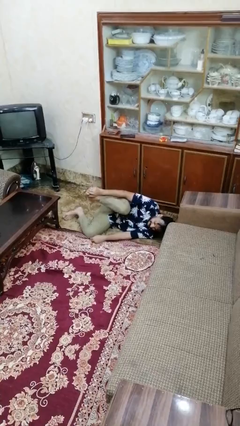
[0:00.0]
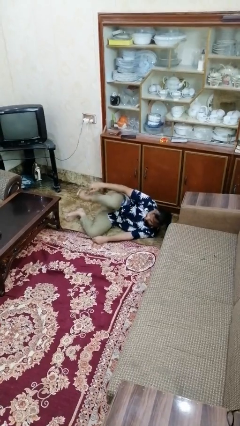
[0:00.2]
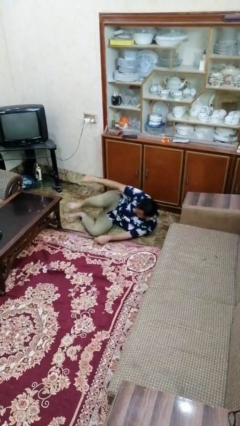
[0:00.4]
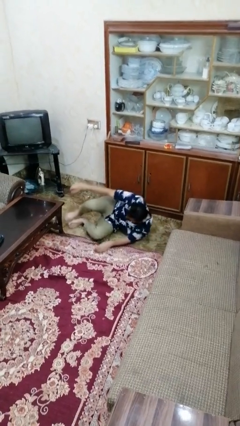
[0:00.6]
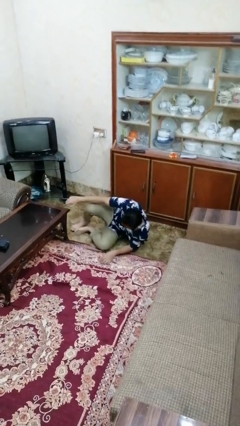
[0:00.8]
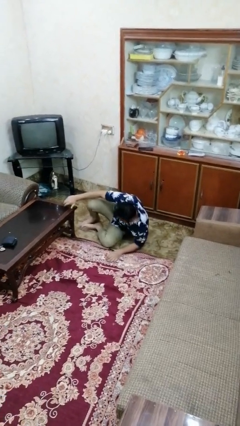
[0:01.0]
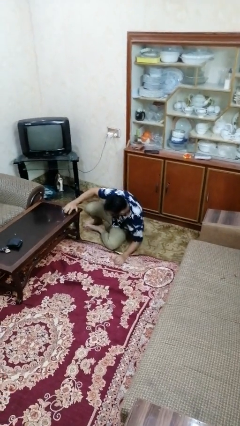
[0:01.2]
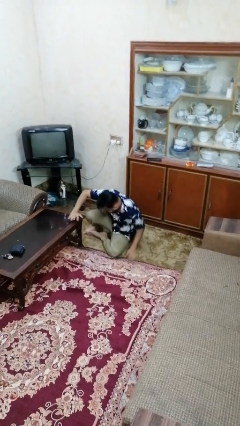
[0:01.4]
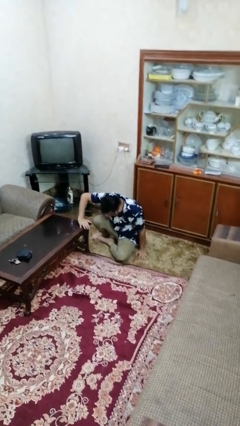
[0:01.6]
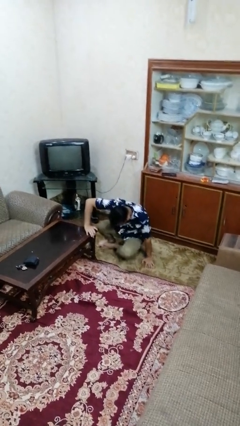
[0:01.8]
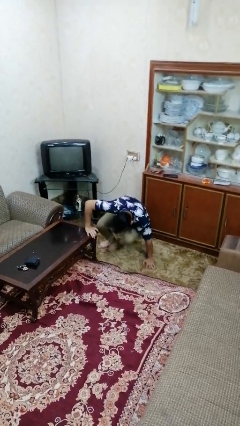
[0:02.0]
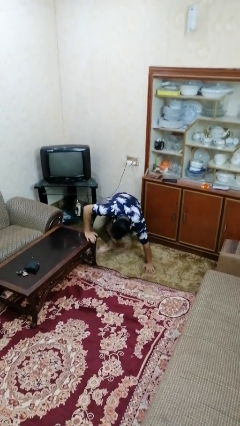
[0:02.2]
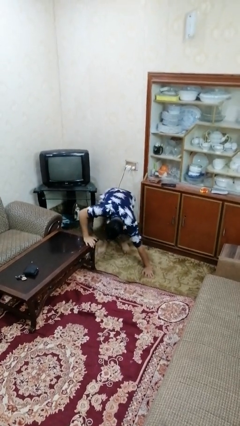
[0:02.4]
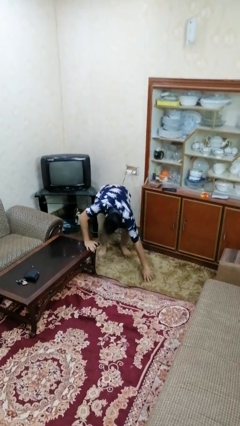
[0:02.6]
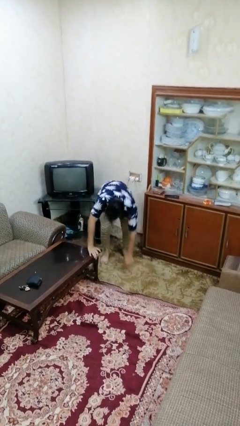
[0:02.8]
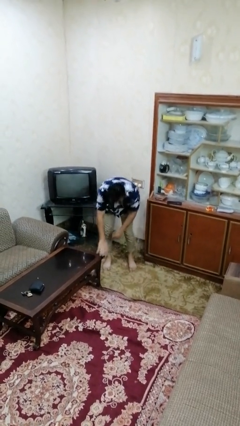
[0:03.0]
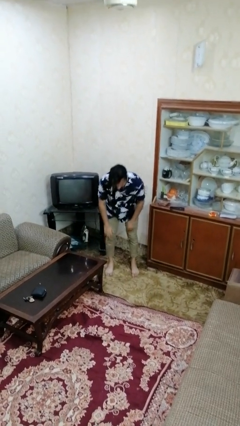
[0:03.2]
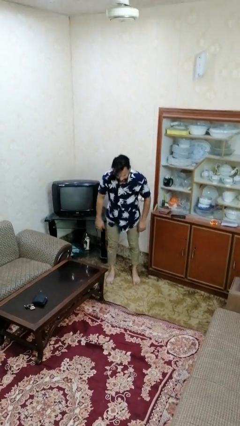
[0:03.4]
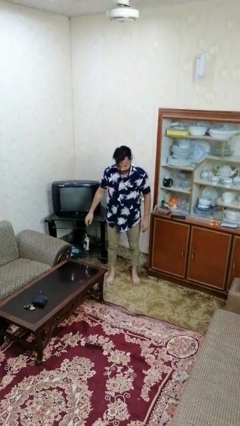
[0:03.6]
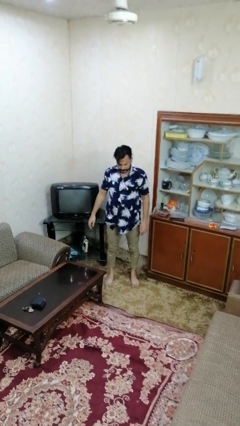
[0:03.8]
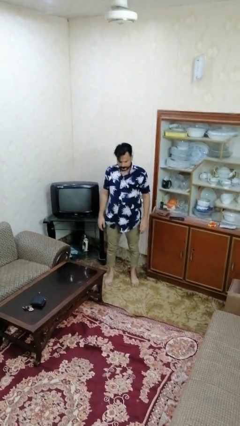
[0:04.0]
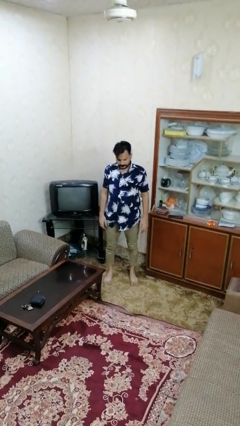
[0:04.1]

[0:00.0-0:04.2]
person stands up from floor

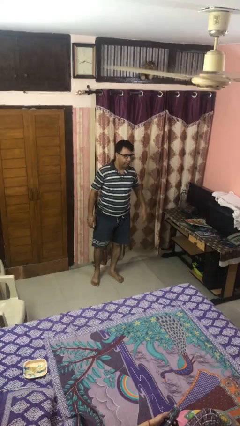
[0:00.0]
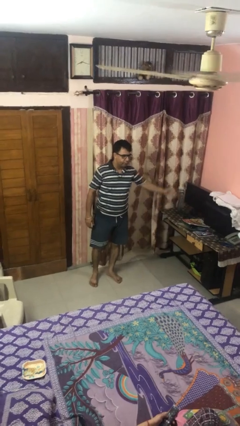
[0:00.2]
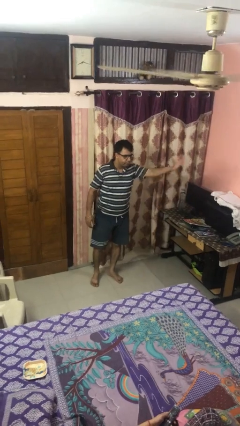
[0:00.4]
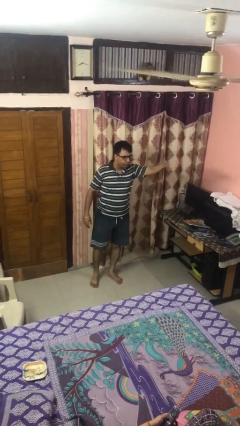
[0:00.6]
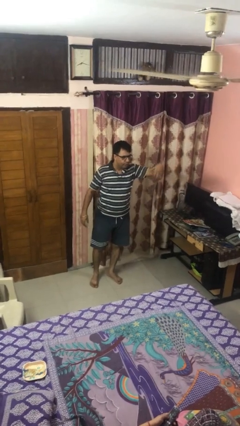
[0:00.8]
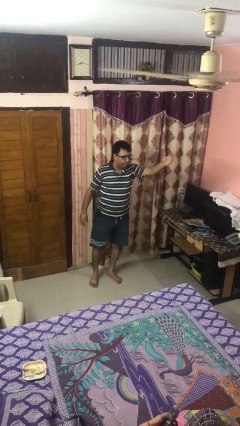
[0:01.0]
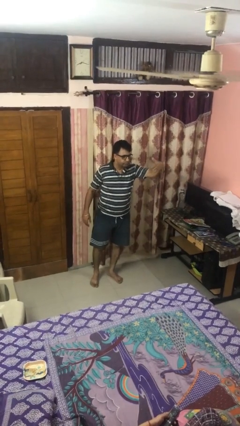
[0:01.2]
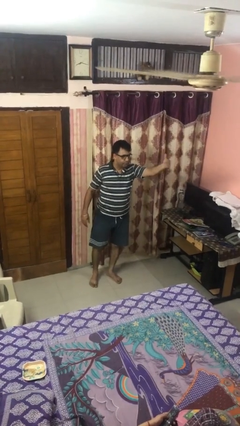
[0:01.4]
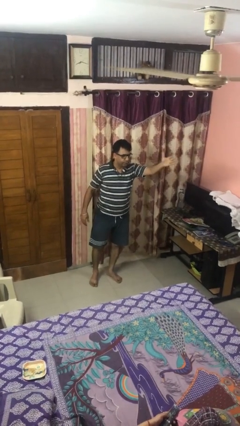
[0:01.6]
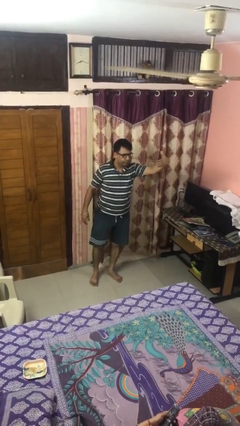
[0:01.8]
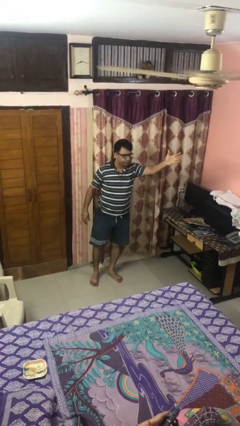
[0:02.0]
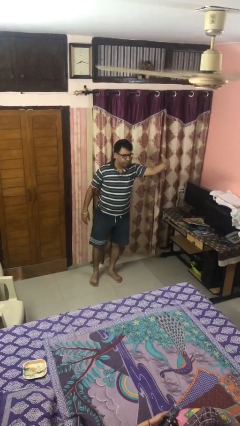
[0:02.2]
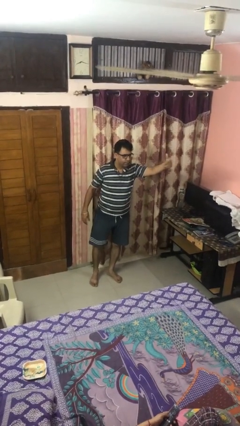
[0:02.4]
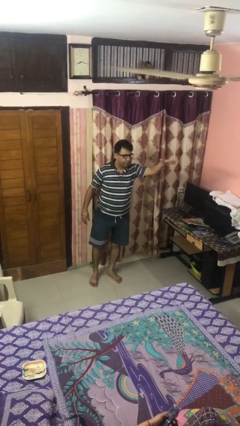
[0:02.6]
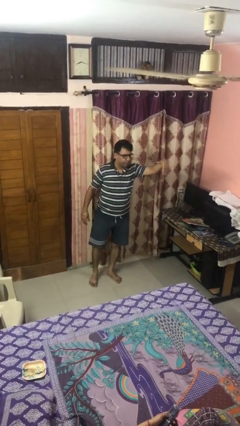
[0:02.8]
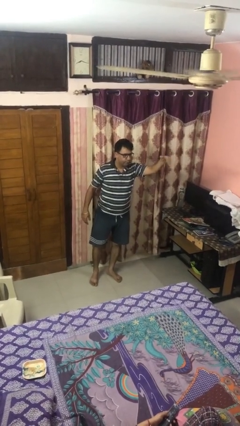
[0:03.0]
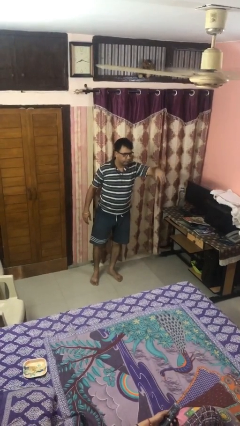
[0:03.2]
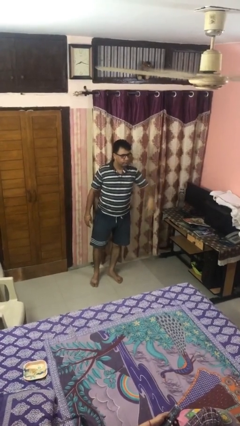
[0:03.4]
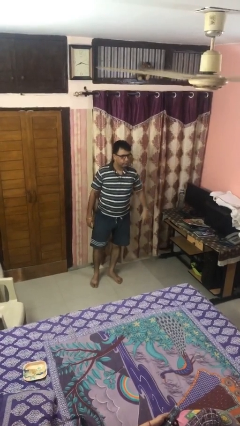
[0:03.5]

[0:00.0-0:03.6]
person gestures come here

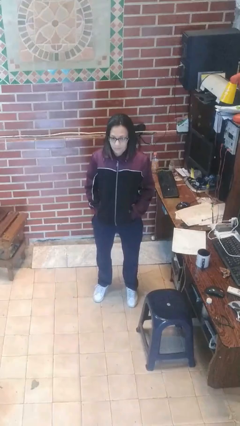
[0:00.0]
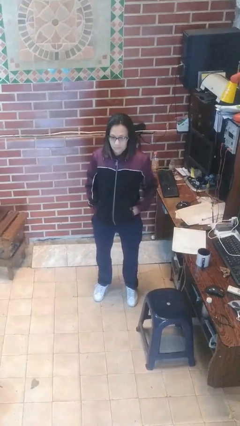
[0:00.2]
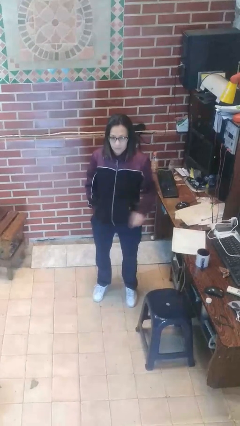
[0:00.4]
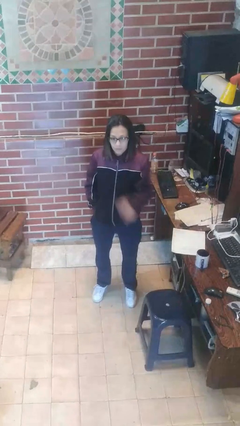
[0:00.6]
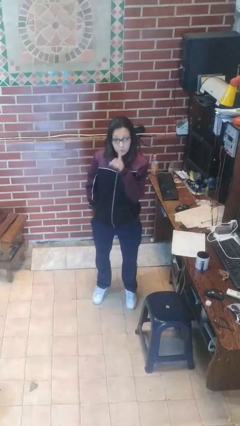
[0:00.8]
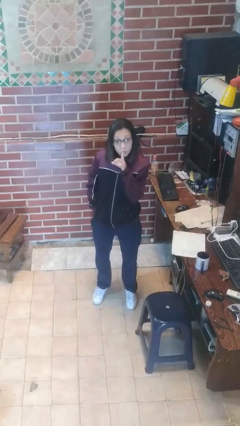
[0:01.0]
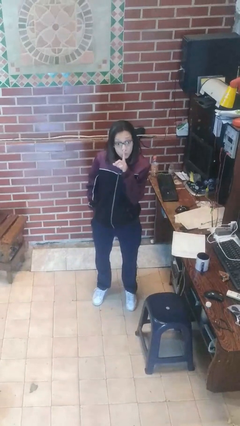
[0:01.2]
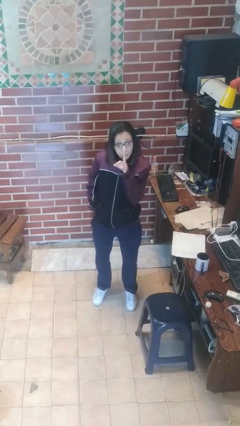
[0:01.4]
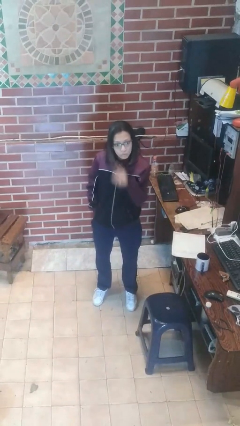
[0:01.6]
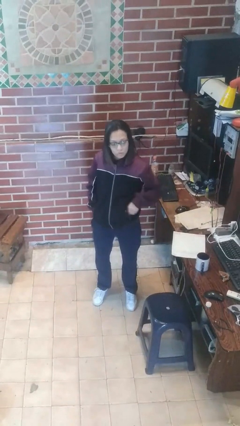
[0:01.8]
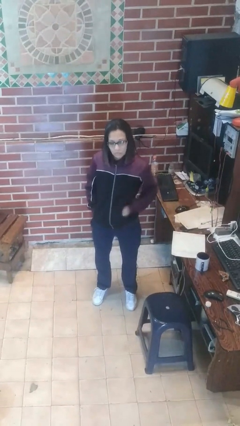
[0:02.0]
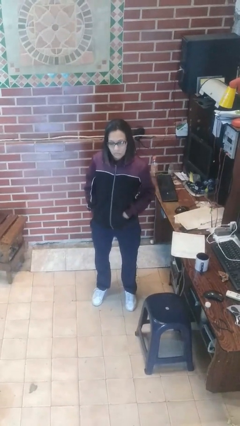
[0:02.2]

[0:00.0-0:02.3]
person gestures be quiet

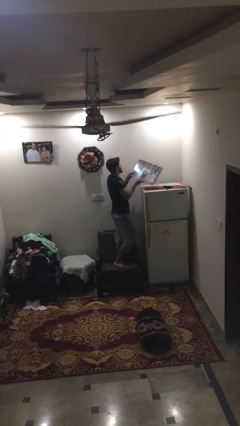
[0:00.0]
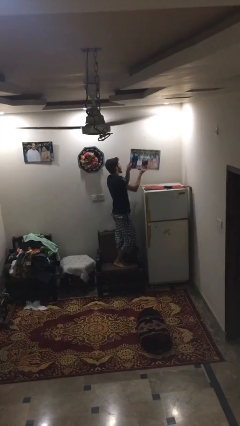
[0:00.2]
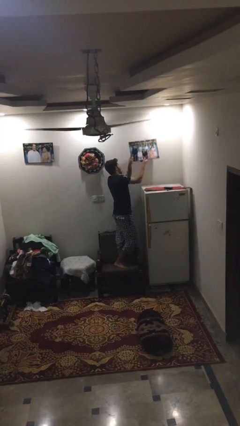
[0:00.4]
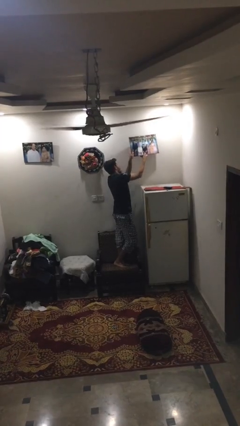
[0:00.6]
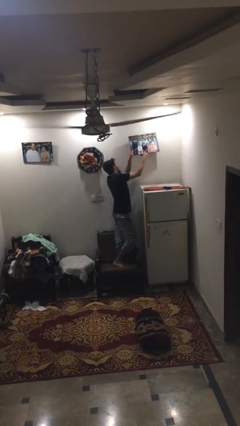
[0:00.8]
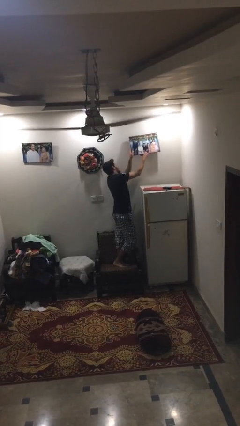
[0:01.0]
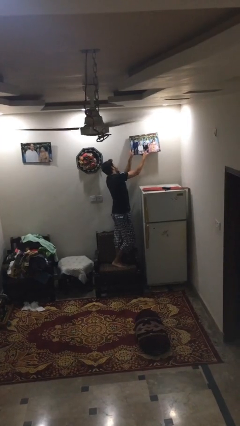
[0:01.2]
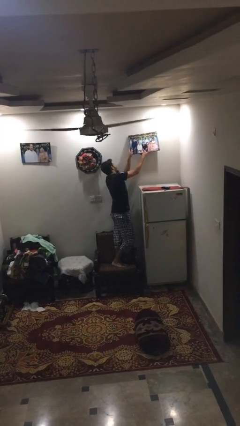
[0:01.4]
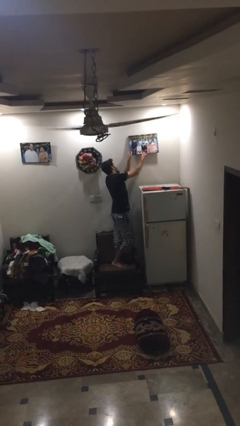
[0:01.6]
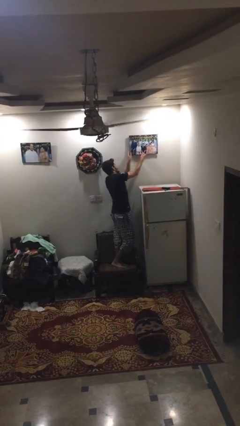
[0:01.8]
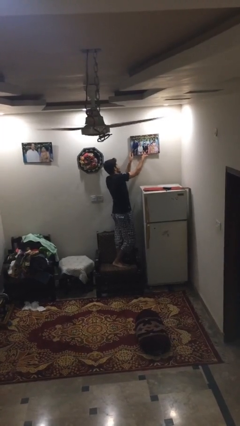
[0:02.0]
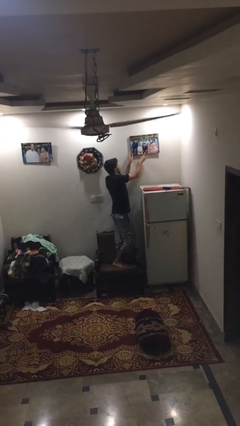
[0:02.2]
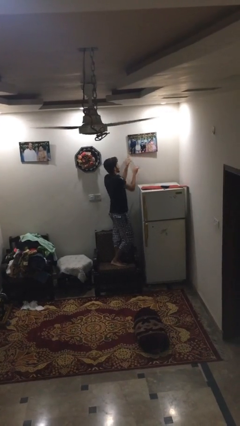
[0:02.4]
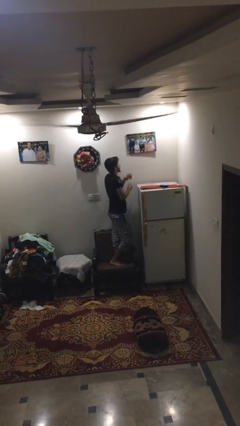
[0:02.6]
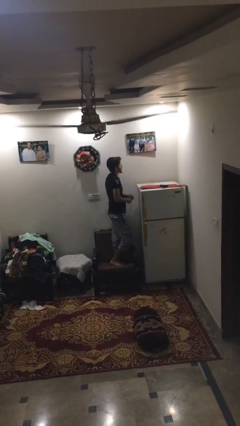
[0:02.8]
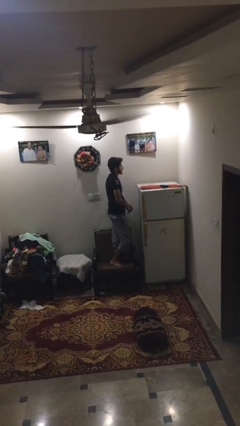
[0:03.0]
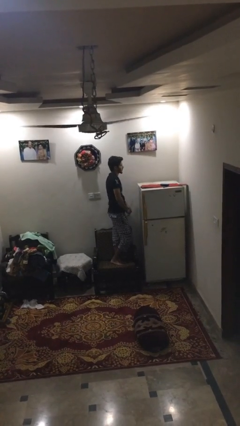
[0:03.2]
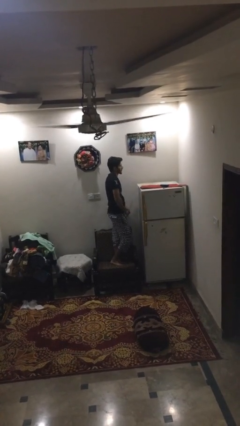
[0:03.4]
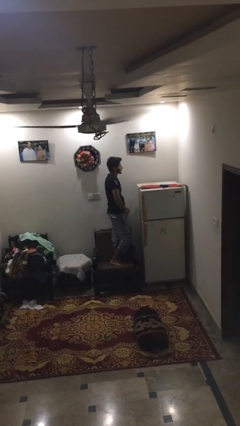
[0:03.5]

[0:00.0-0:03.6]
person puts up picture frame

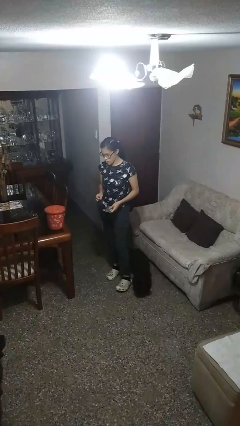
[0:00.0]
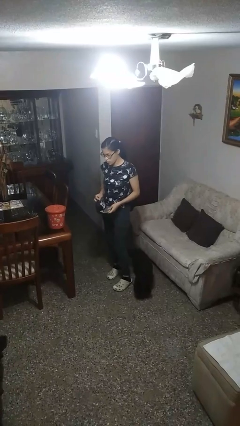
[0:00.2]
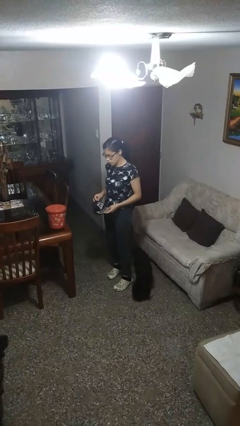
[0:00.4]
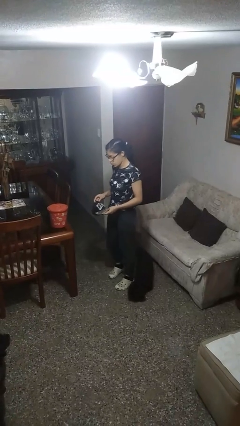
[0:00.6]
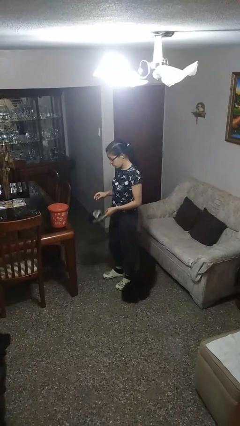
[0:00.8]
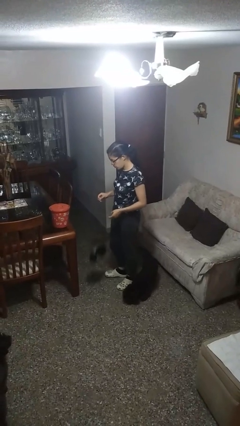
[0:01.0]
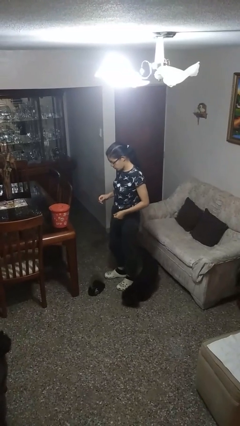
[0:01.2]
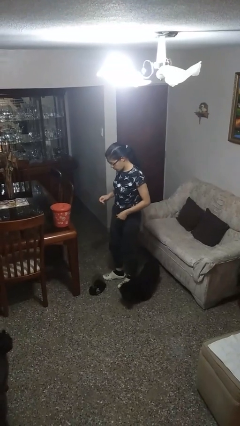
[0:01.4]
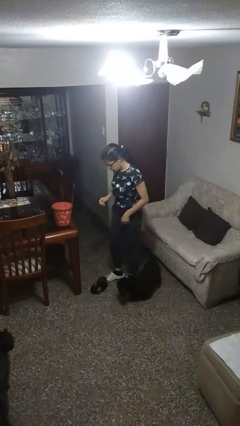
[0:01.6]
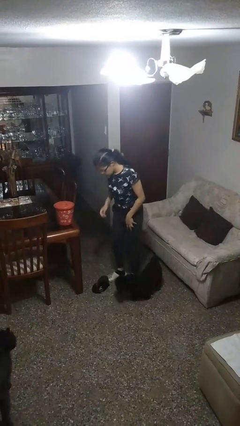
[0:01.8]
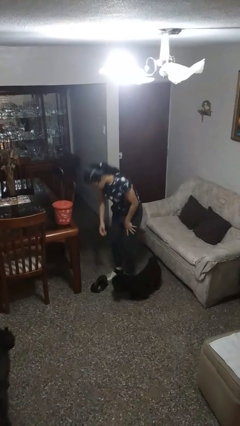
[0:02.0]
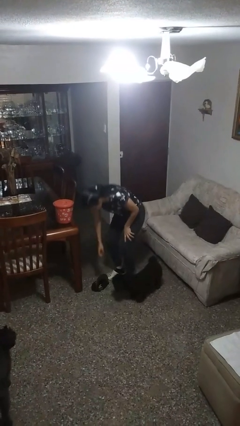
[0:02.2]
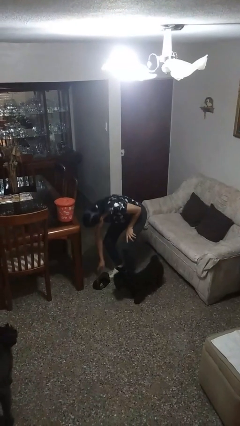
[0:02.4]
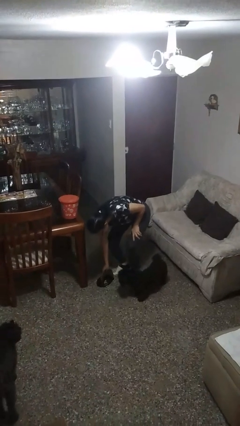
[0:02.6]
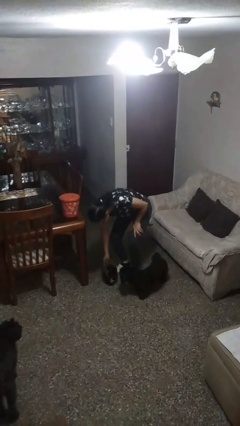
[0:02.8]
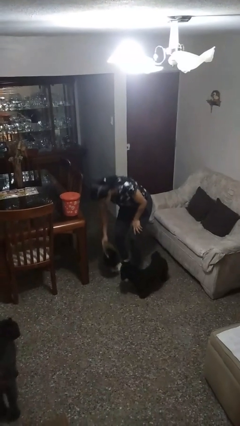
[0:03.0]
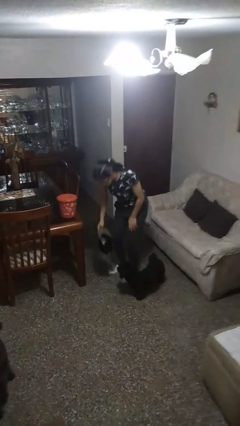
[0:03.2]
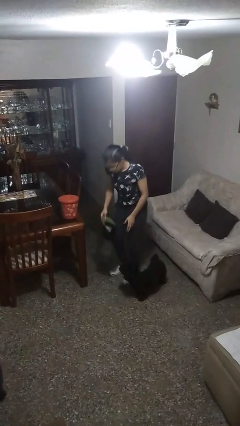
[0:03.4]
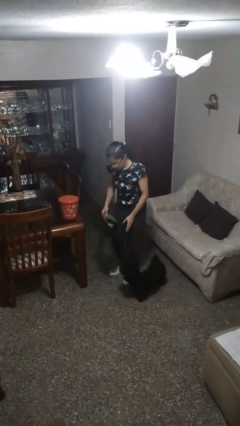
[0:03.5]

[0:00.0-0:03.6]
person drops object

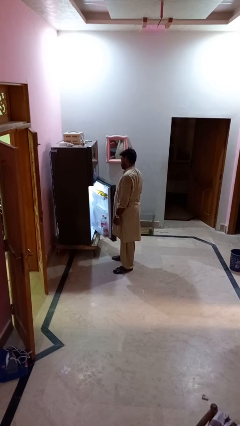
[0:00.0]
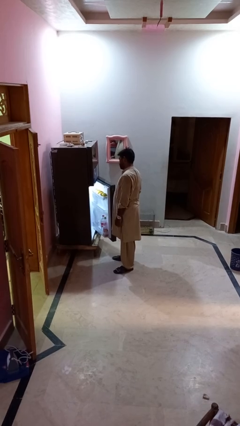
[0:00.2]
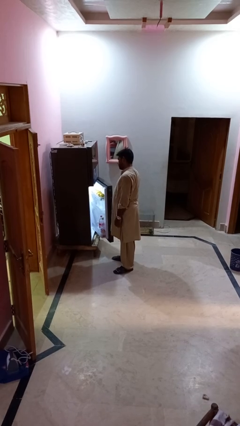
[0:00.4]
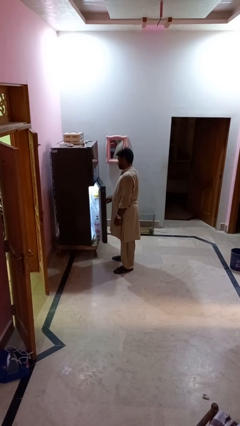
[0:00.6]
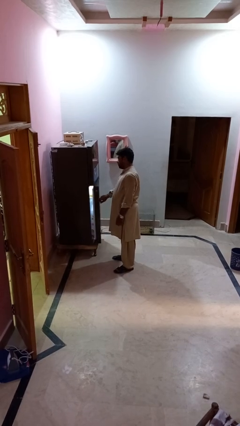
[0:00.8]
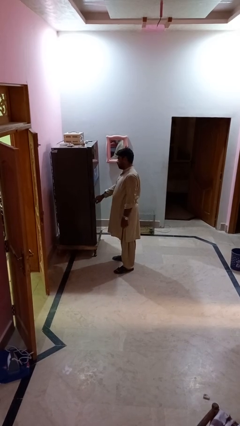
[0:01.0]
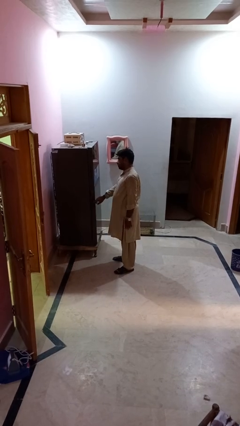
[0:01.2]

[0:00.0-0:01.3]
person closes refrigerator
